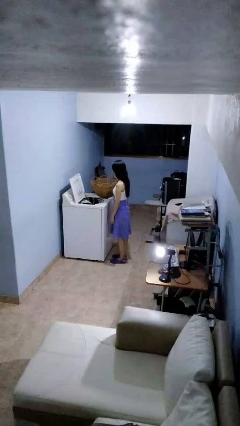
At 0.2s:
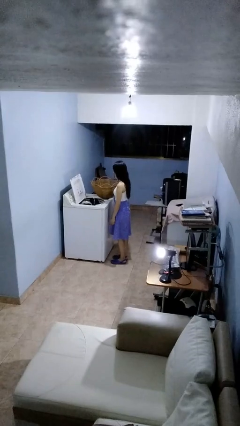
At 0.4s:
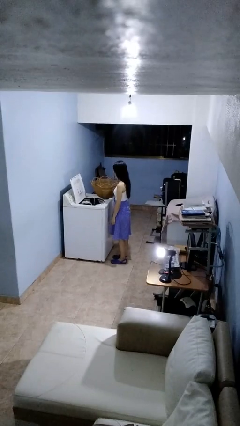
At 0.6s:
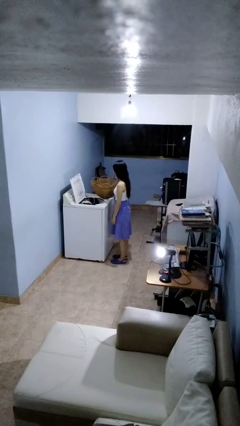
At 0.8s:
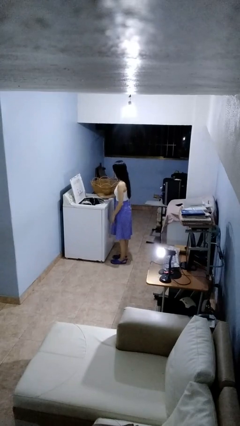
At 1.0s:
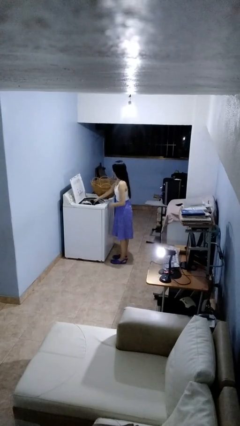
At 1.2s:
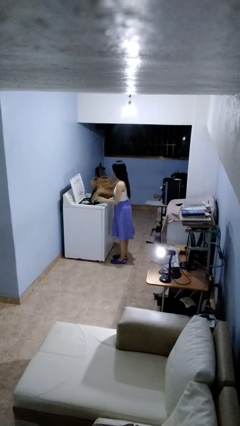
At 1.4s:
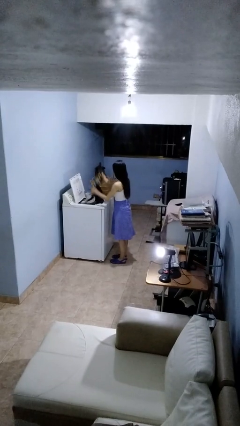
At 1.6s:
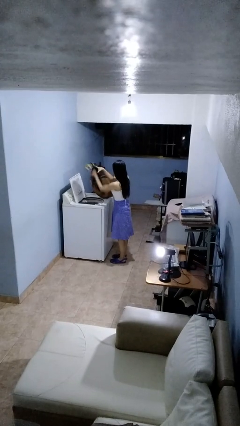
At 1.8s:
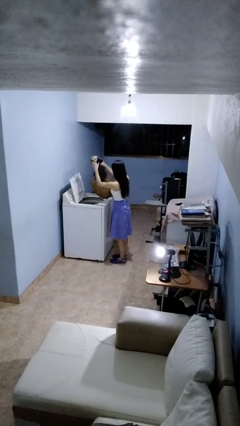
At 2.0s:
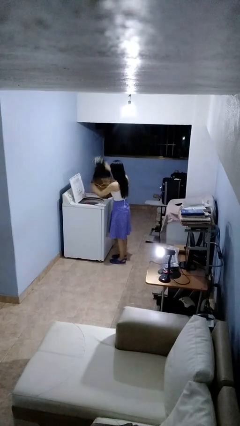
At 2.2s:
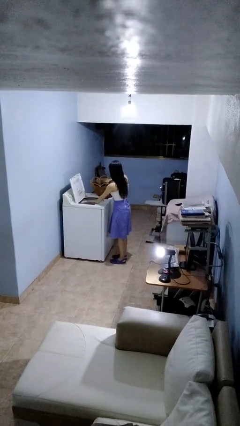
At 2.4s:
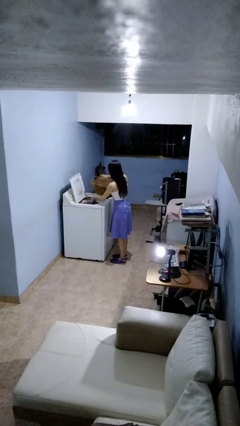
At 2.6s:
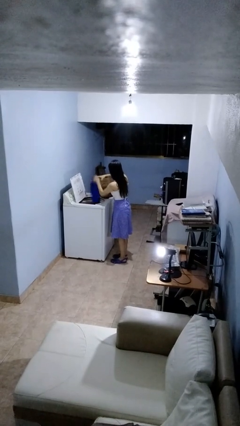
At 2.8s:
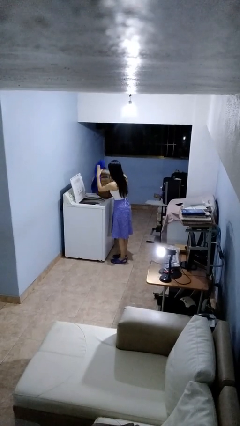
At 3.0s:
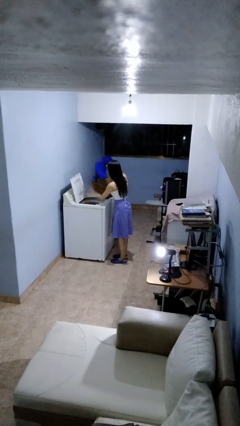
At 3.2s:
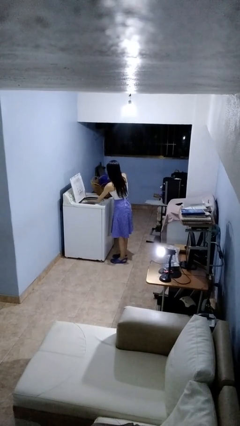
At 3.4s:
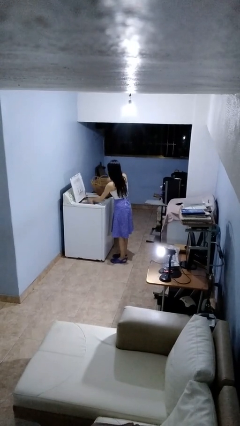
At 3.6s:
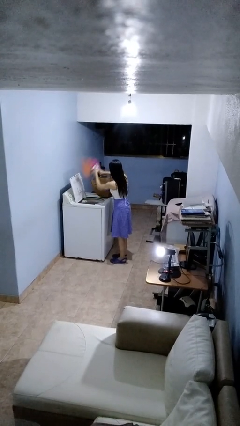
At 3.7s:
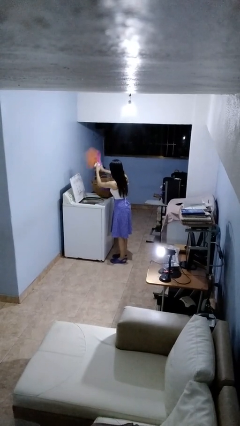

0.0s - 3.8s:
person unloads clotheswasher

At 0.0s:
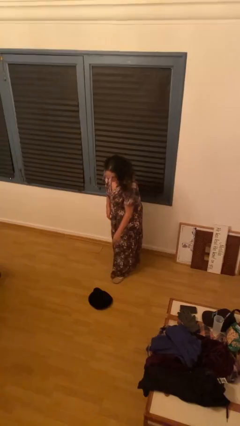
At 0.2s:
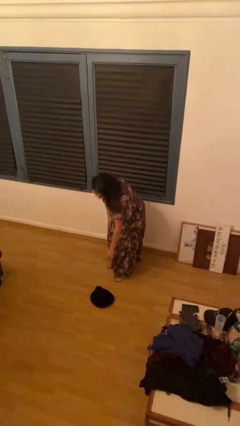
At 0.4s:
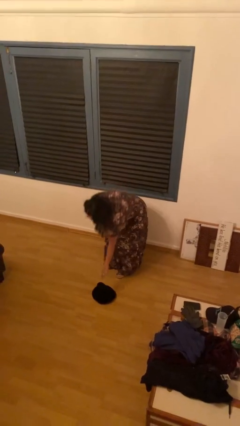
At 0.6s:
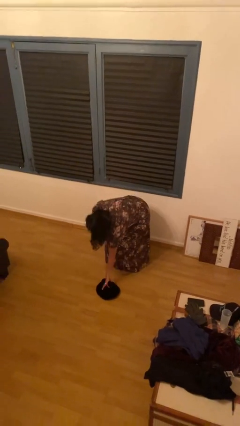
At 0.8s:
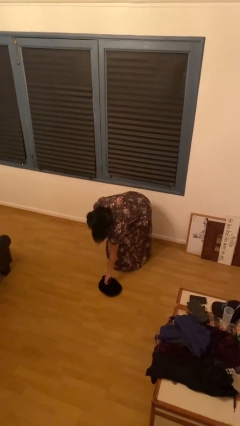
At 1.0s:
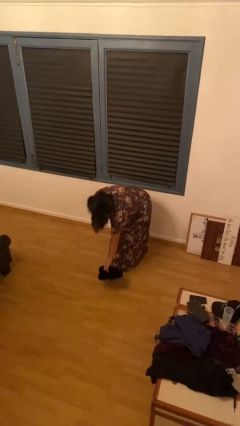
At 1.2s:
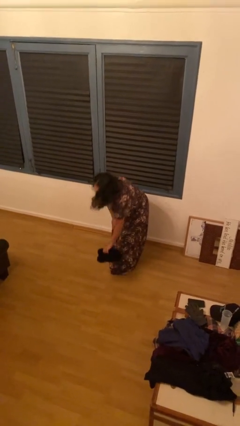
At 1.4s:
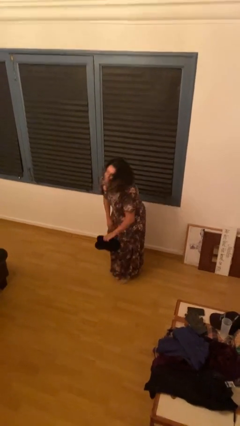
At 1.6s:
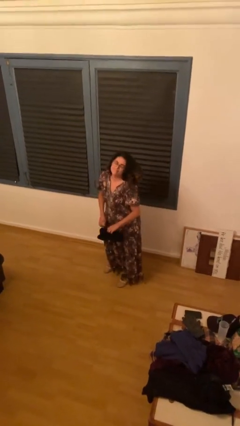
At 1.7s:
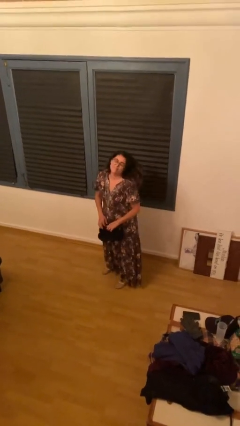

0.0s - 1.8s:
person picks up object from floor

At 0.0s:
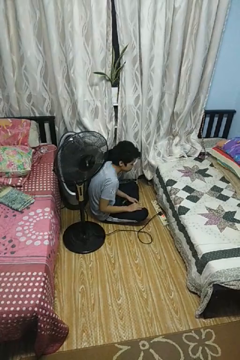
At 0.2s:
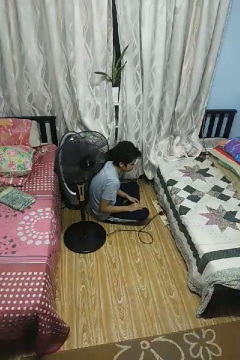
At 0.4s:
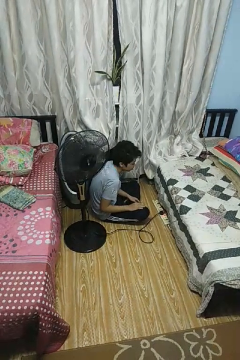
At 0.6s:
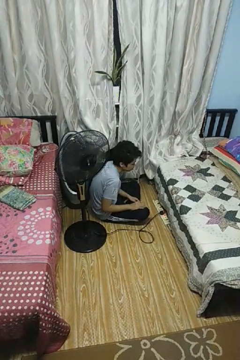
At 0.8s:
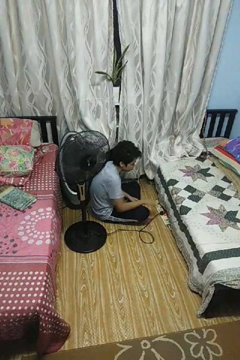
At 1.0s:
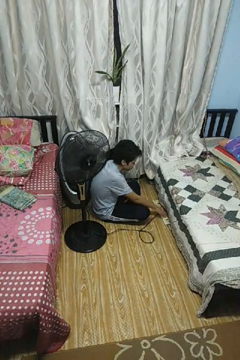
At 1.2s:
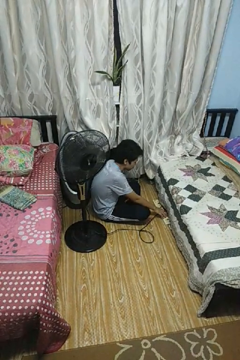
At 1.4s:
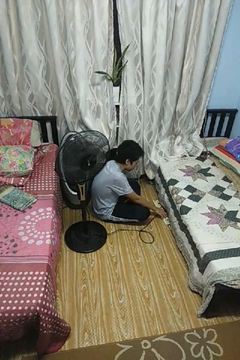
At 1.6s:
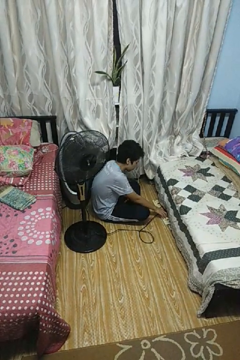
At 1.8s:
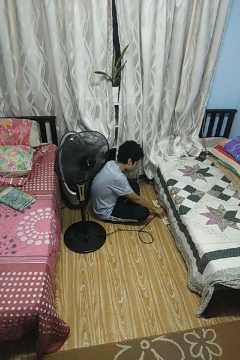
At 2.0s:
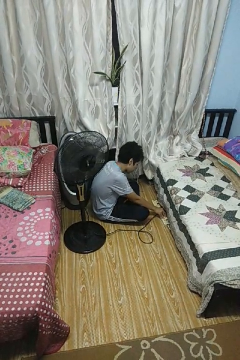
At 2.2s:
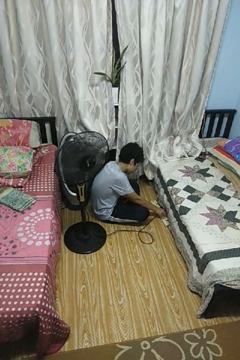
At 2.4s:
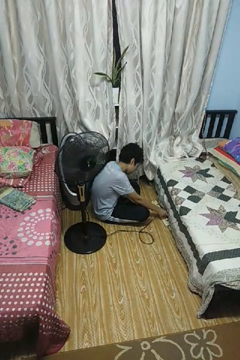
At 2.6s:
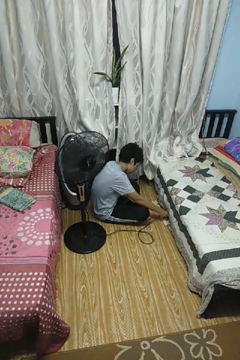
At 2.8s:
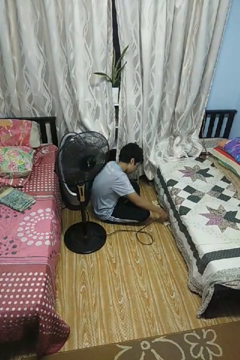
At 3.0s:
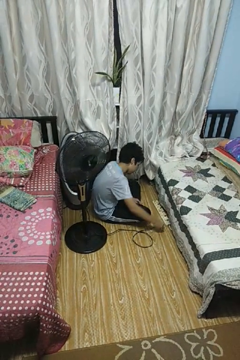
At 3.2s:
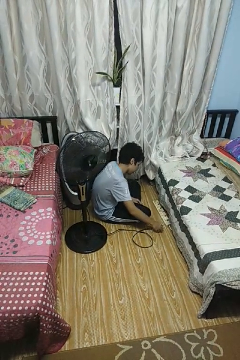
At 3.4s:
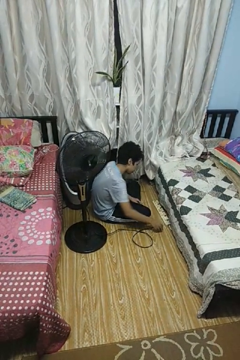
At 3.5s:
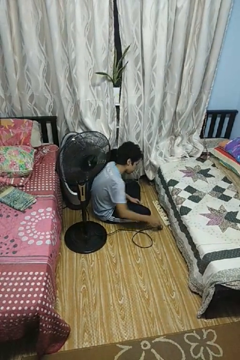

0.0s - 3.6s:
person unplugs from electrical socket

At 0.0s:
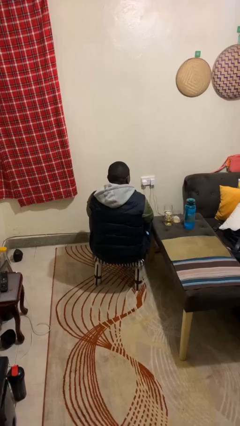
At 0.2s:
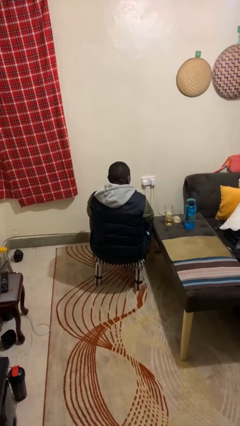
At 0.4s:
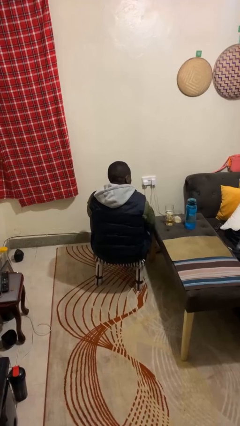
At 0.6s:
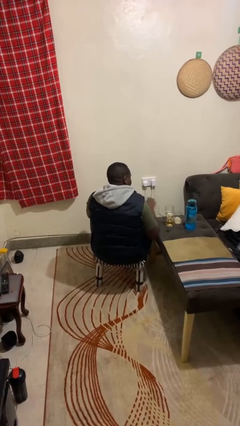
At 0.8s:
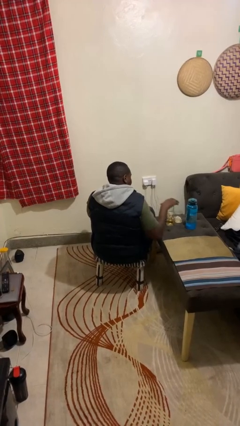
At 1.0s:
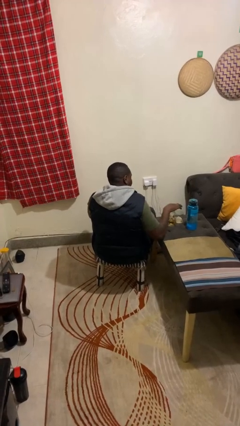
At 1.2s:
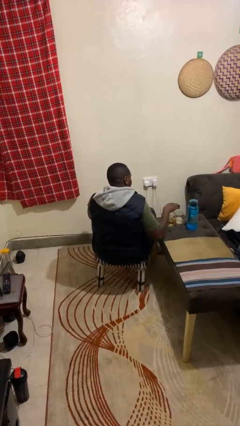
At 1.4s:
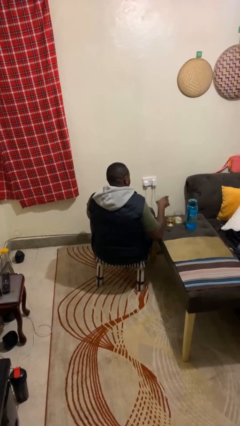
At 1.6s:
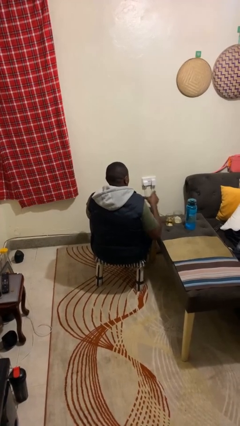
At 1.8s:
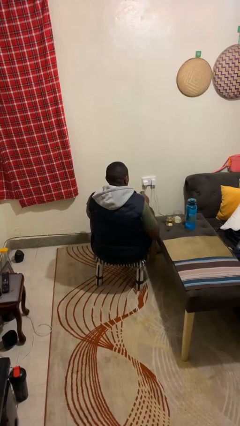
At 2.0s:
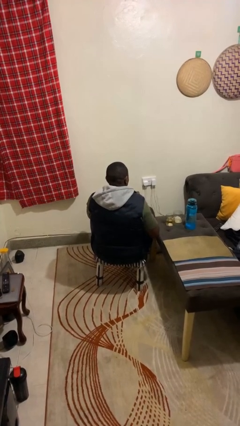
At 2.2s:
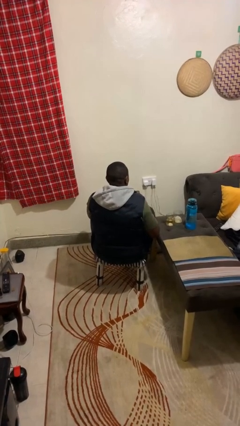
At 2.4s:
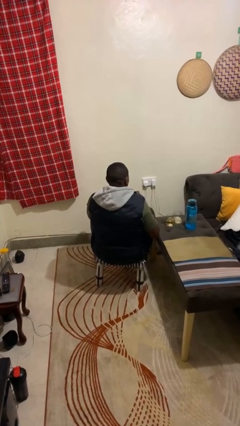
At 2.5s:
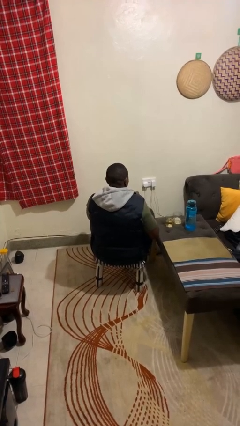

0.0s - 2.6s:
person picks up object from table

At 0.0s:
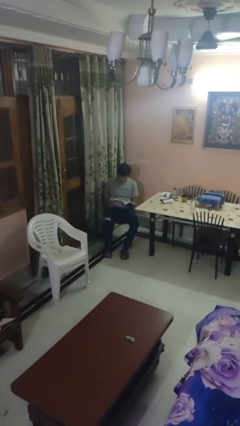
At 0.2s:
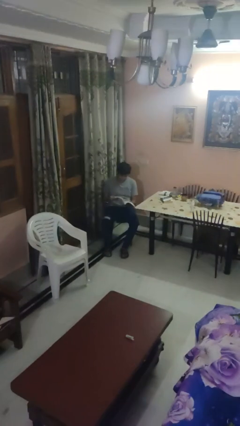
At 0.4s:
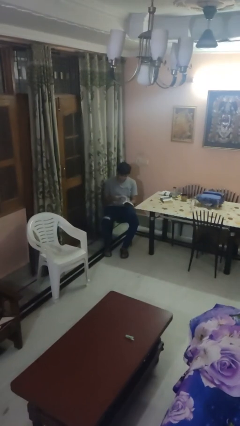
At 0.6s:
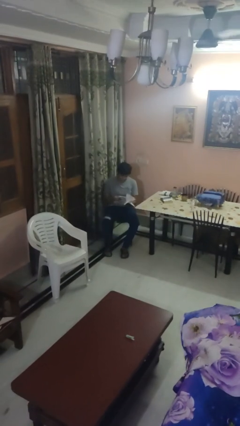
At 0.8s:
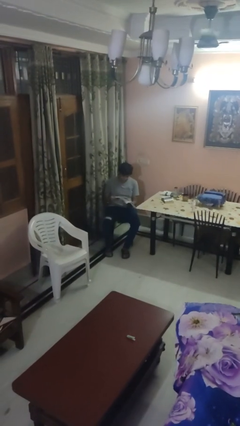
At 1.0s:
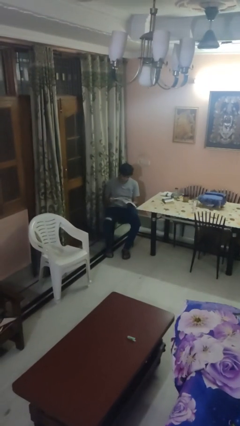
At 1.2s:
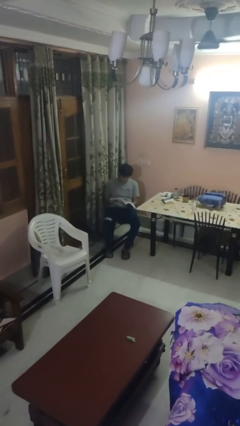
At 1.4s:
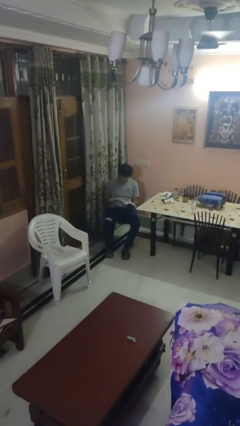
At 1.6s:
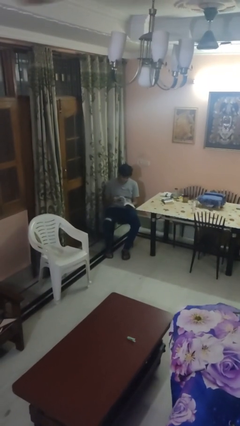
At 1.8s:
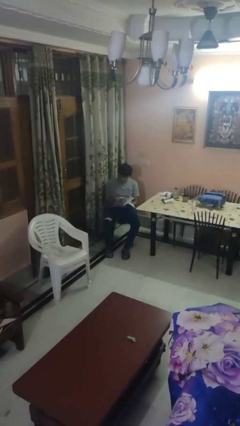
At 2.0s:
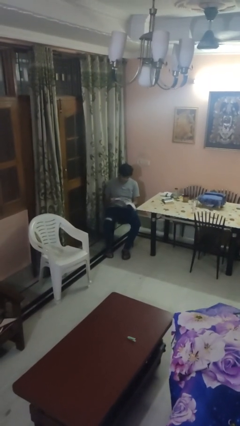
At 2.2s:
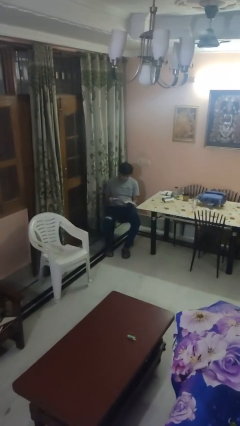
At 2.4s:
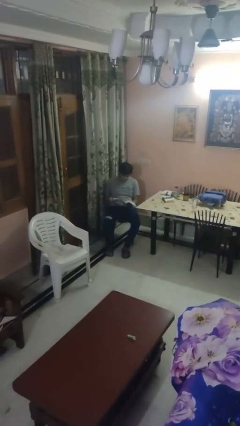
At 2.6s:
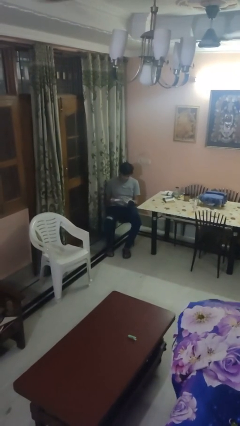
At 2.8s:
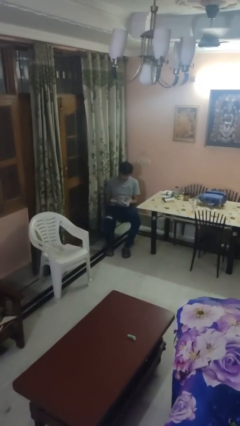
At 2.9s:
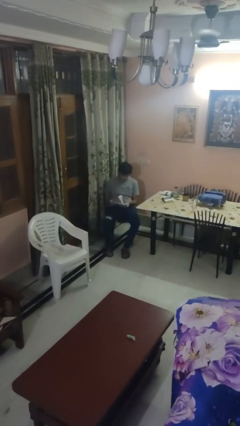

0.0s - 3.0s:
person reads magazine

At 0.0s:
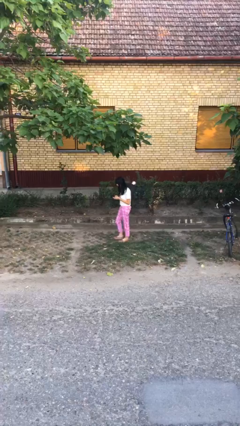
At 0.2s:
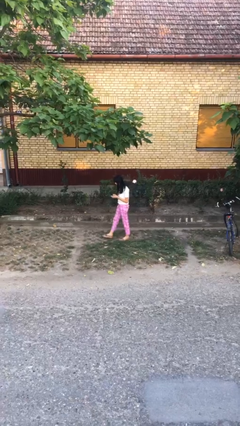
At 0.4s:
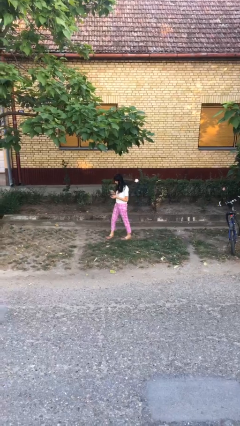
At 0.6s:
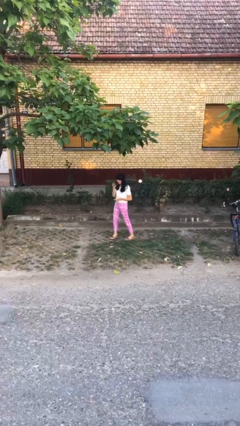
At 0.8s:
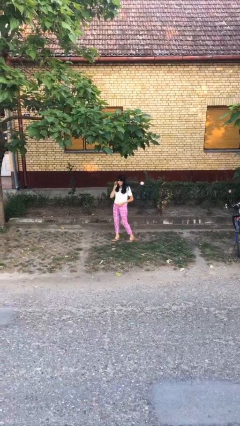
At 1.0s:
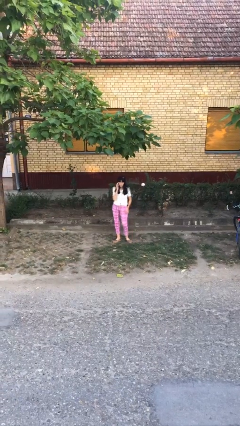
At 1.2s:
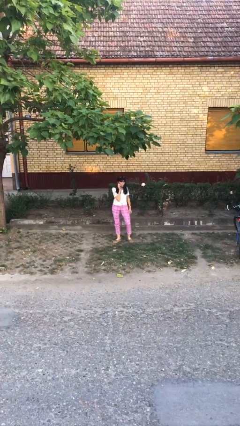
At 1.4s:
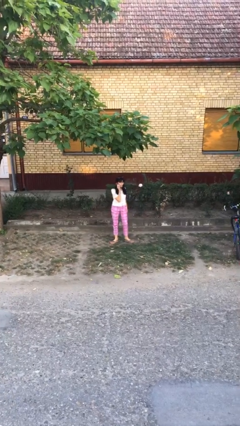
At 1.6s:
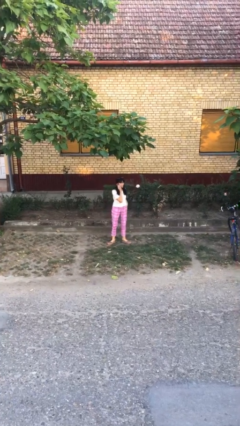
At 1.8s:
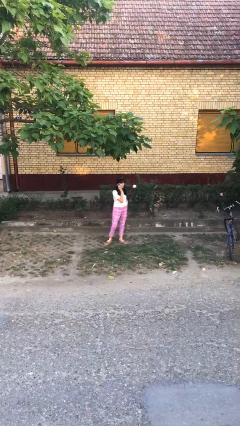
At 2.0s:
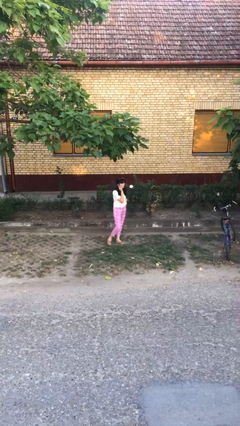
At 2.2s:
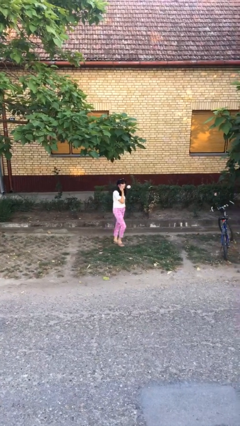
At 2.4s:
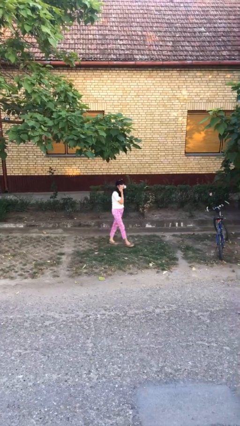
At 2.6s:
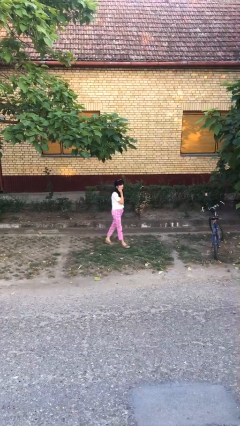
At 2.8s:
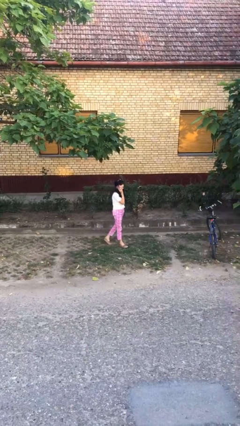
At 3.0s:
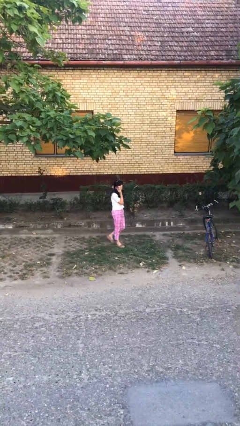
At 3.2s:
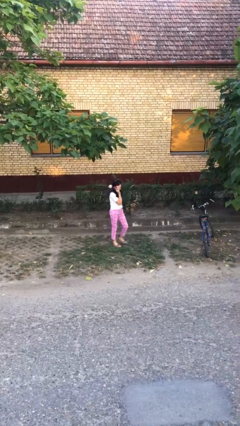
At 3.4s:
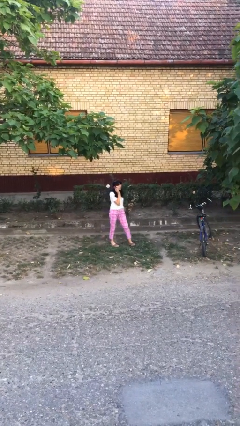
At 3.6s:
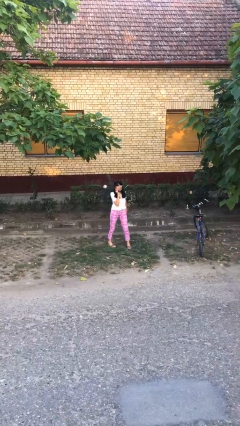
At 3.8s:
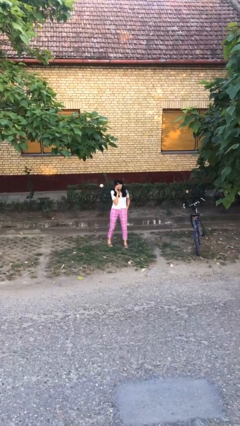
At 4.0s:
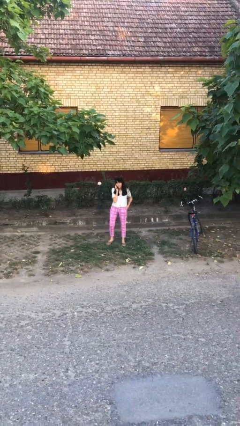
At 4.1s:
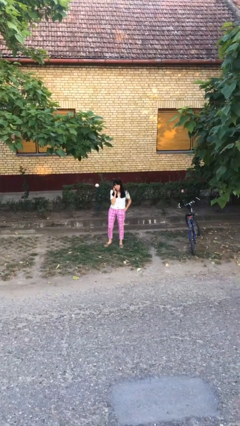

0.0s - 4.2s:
person talks on phone
